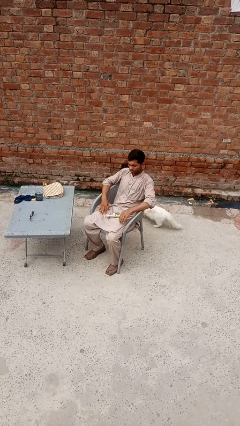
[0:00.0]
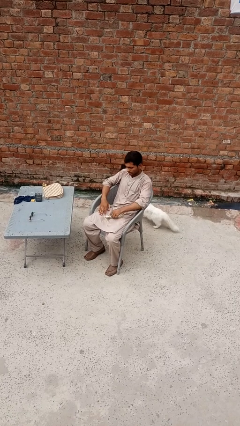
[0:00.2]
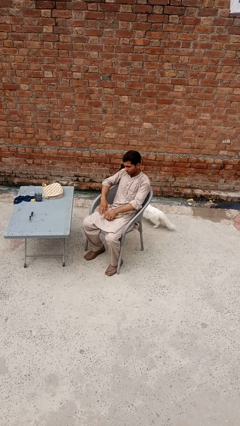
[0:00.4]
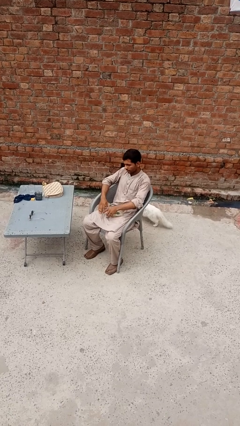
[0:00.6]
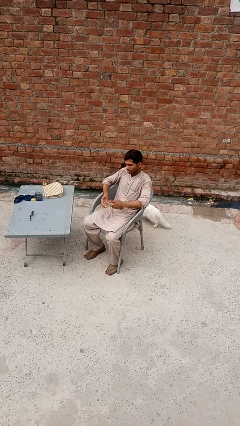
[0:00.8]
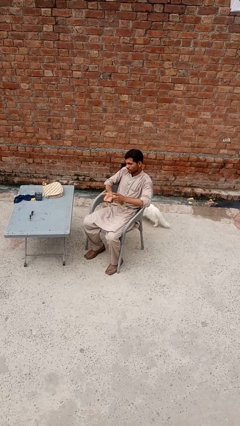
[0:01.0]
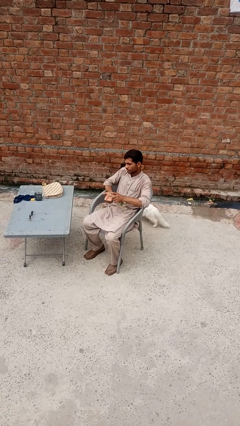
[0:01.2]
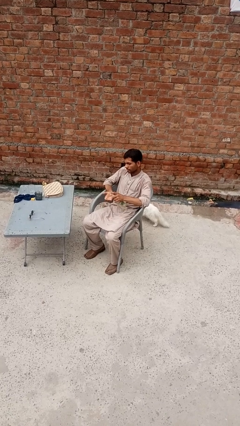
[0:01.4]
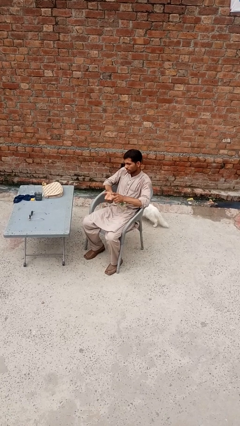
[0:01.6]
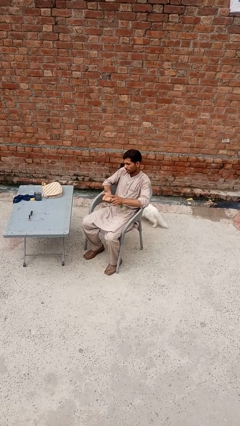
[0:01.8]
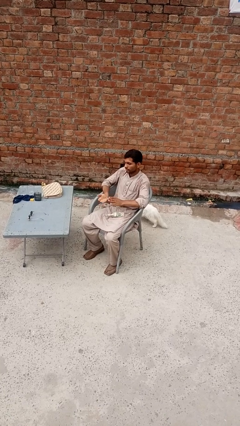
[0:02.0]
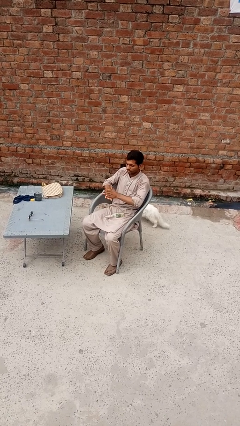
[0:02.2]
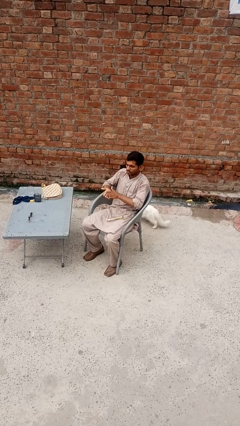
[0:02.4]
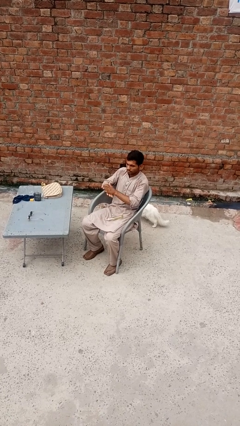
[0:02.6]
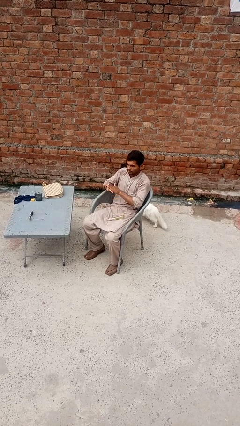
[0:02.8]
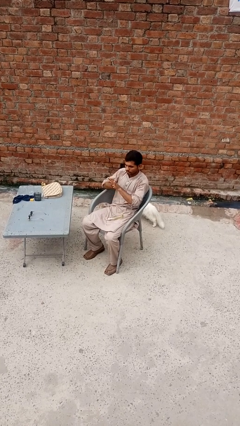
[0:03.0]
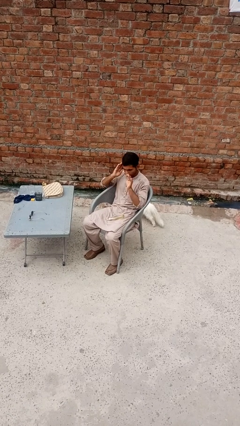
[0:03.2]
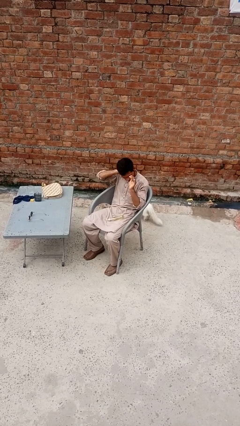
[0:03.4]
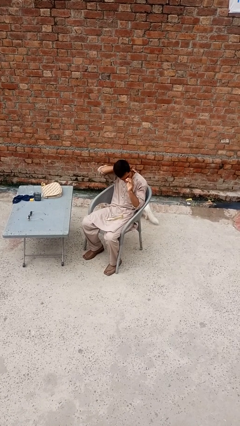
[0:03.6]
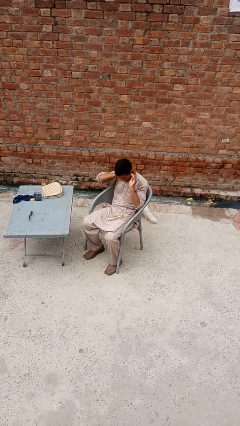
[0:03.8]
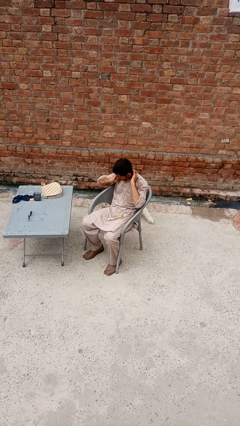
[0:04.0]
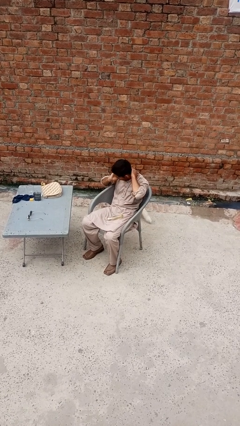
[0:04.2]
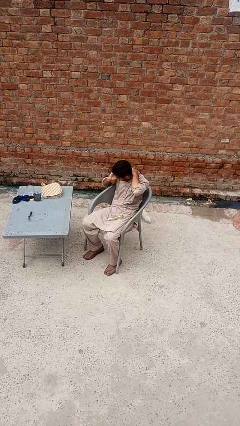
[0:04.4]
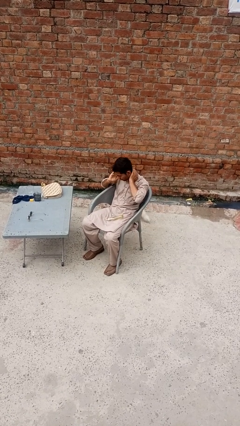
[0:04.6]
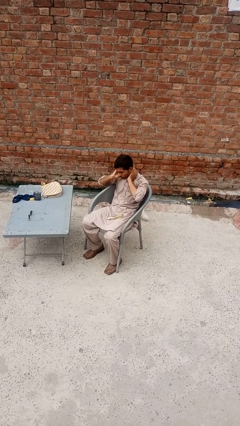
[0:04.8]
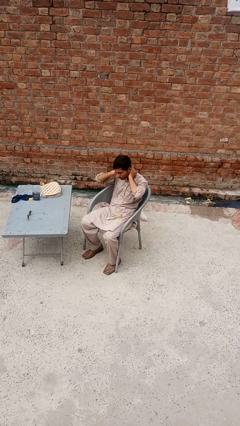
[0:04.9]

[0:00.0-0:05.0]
person applies sunscreen

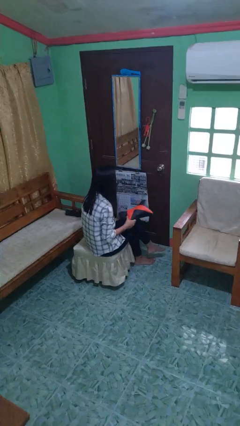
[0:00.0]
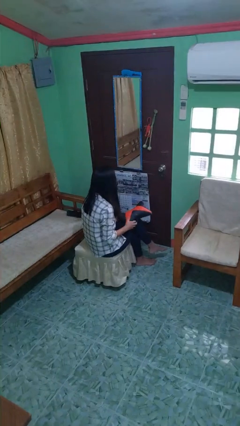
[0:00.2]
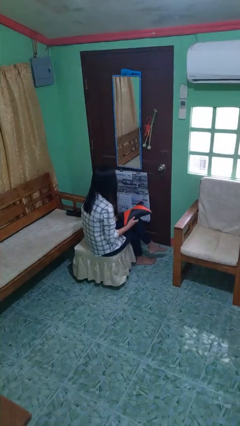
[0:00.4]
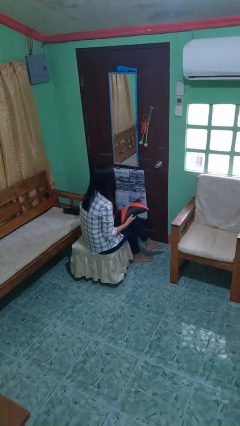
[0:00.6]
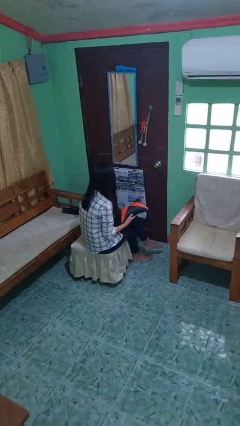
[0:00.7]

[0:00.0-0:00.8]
person drops object

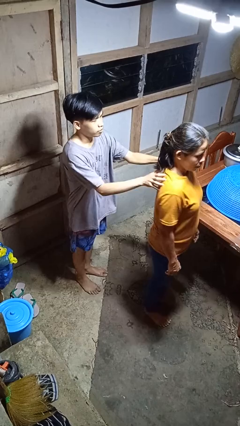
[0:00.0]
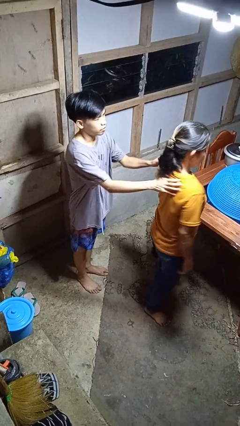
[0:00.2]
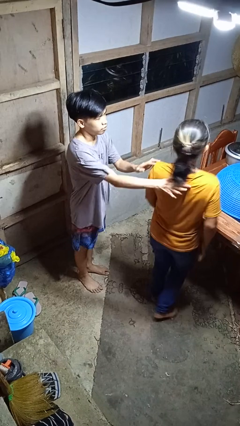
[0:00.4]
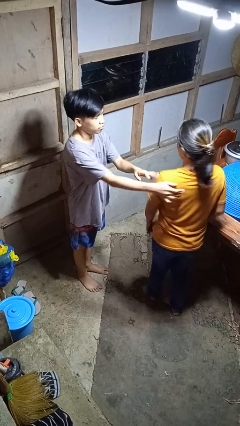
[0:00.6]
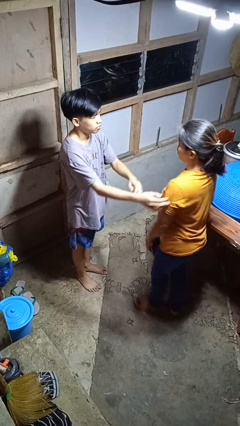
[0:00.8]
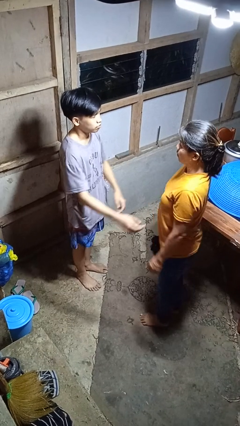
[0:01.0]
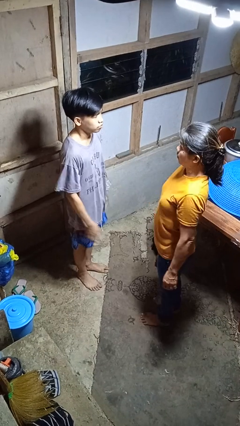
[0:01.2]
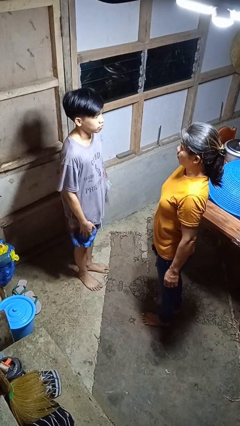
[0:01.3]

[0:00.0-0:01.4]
person spins person around

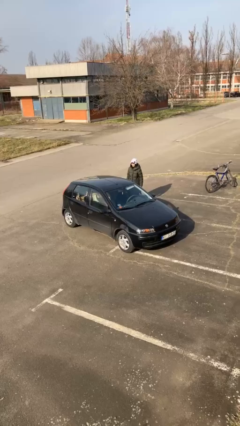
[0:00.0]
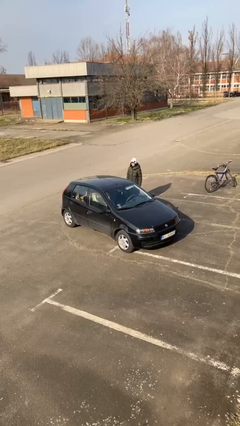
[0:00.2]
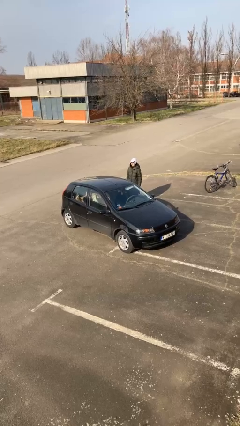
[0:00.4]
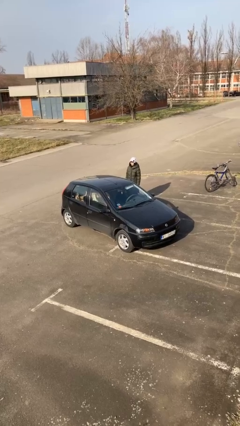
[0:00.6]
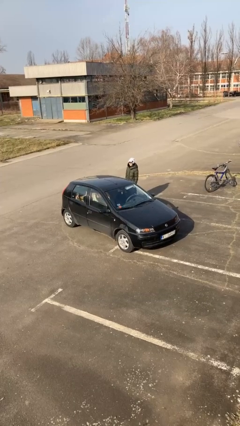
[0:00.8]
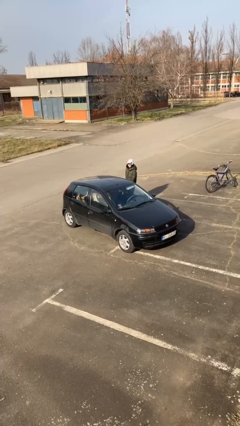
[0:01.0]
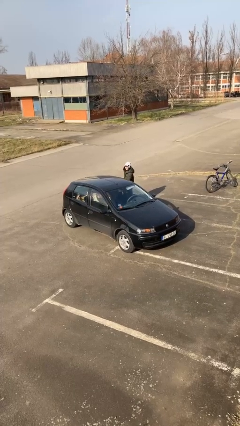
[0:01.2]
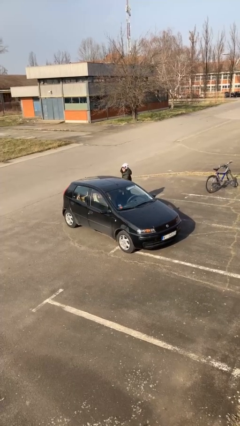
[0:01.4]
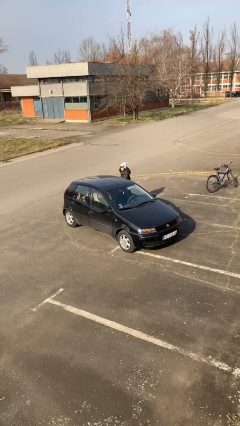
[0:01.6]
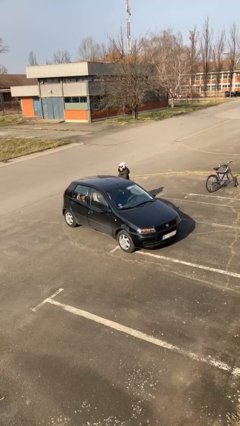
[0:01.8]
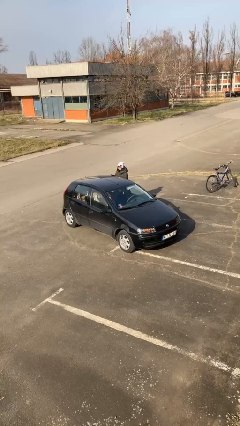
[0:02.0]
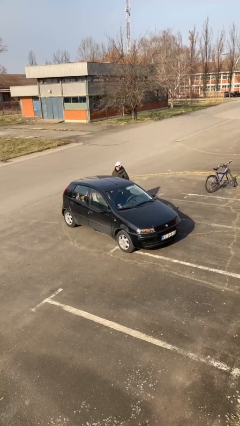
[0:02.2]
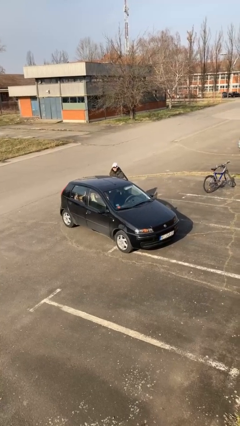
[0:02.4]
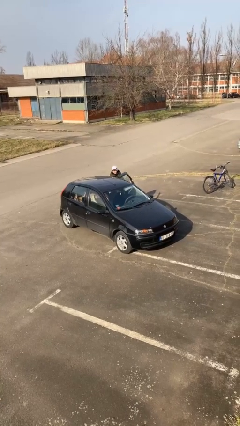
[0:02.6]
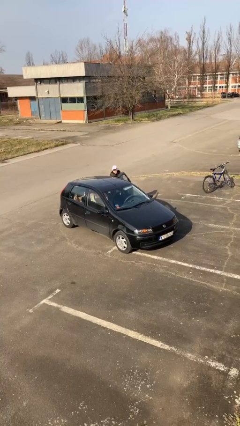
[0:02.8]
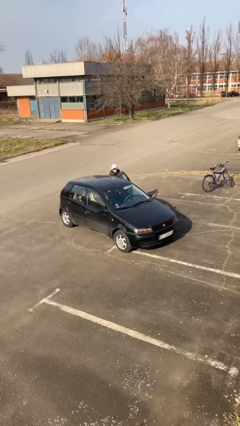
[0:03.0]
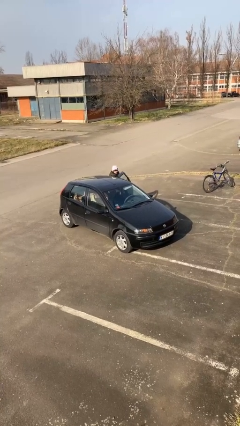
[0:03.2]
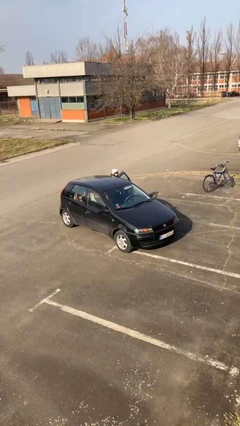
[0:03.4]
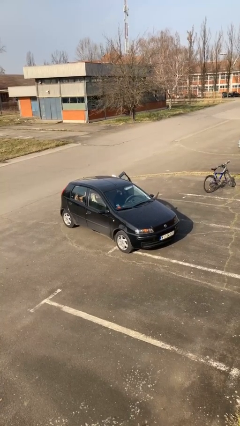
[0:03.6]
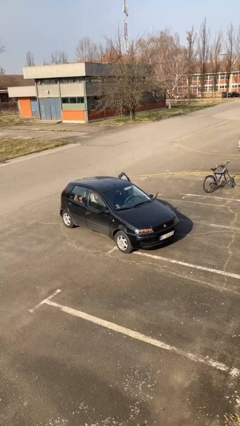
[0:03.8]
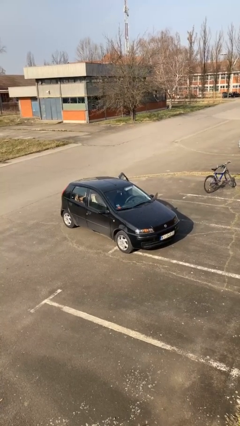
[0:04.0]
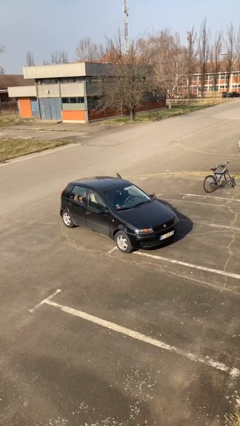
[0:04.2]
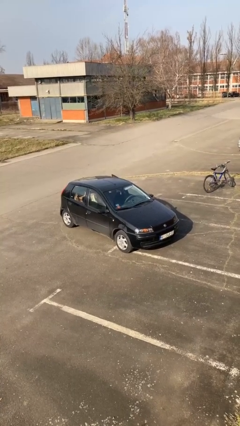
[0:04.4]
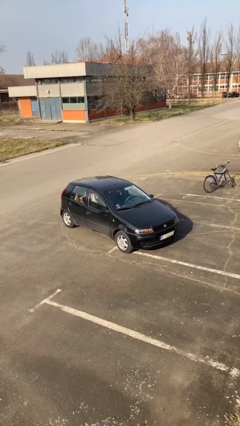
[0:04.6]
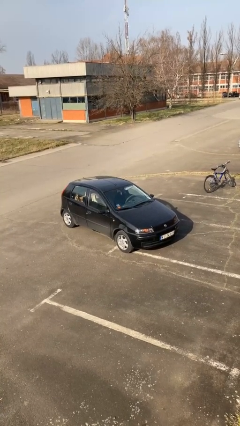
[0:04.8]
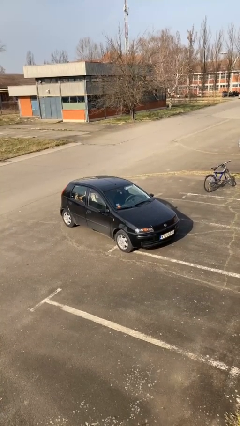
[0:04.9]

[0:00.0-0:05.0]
car picks up person

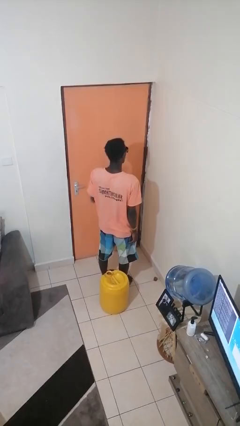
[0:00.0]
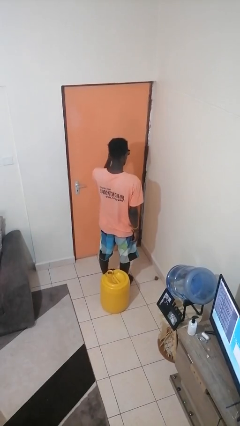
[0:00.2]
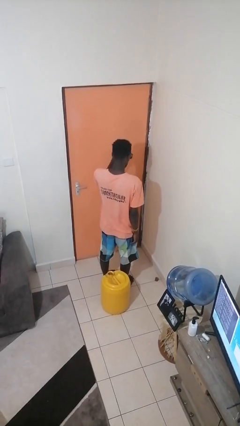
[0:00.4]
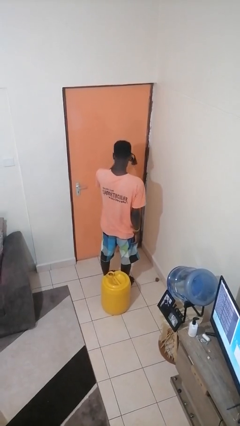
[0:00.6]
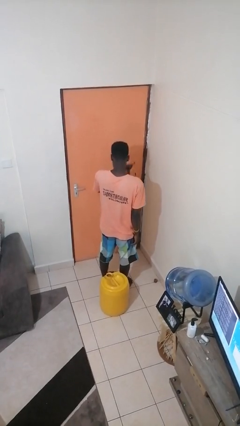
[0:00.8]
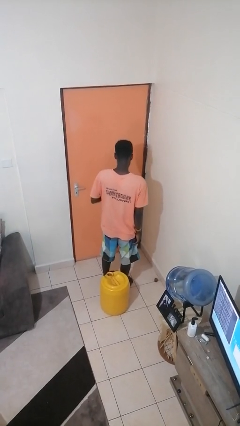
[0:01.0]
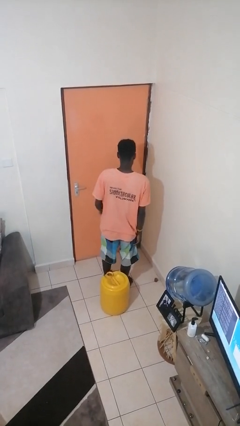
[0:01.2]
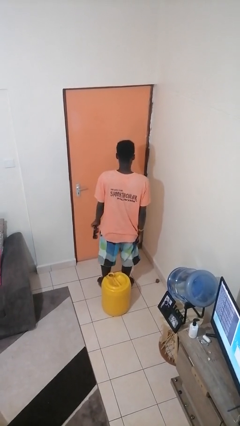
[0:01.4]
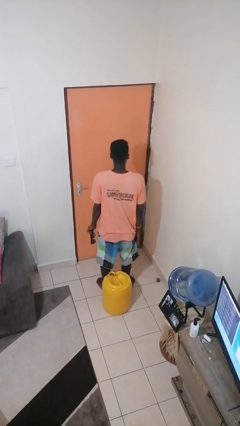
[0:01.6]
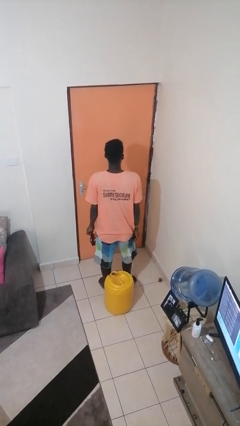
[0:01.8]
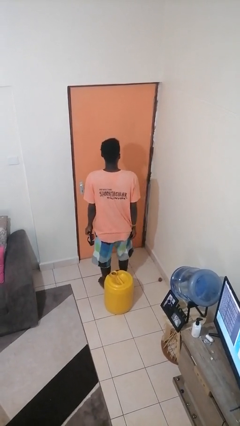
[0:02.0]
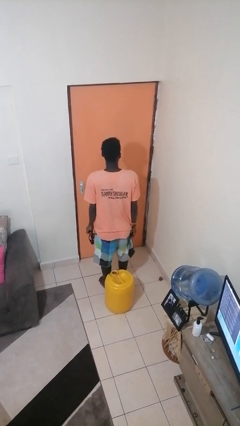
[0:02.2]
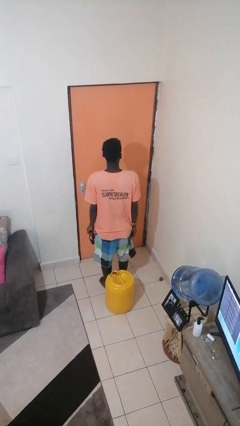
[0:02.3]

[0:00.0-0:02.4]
person takes off sunglasses

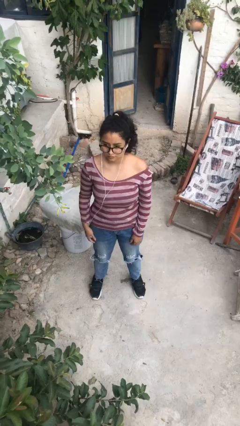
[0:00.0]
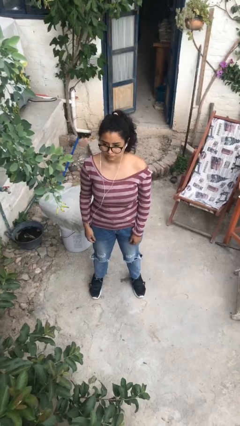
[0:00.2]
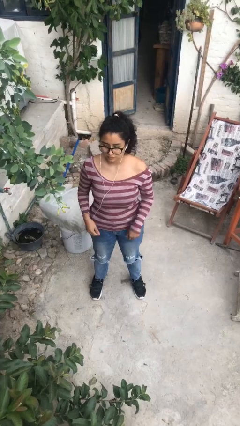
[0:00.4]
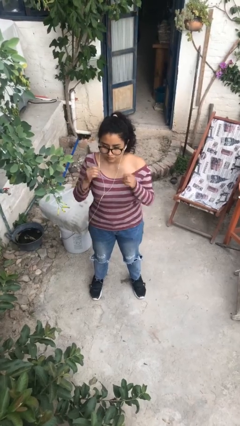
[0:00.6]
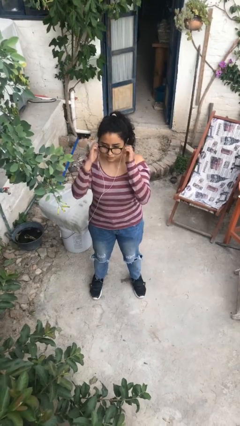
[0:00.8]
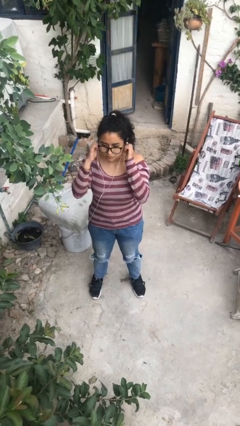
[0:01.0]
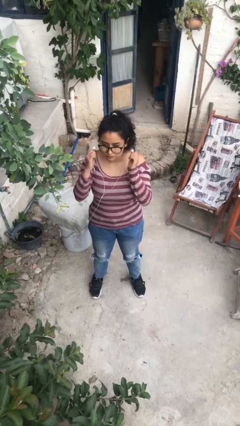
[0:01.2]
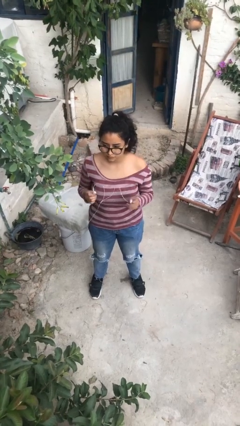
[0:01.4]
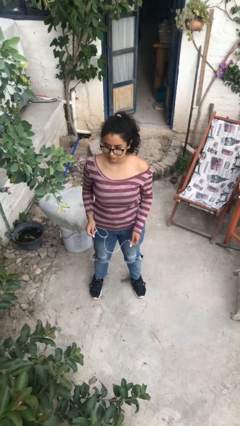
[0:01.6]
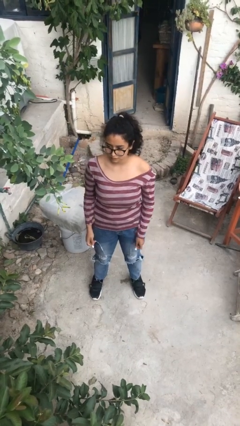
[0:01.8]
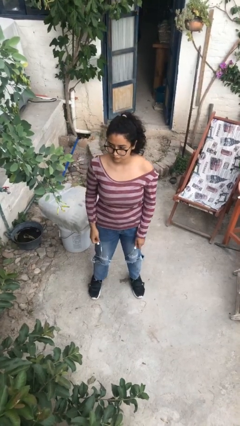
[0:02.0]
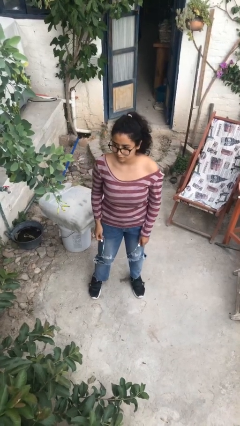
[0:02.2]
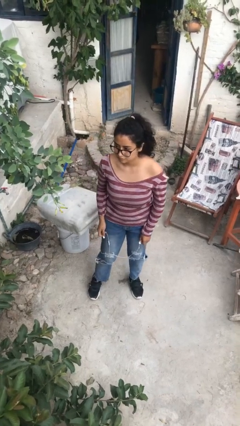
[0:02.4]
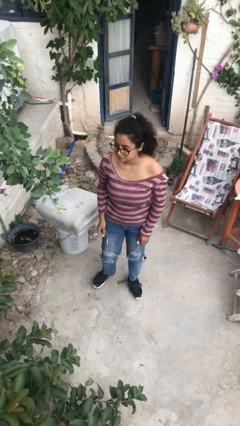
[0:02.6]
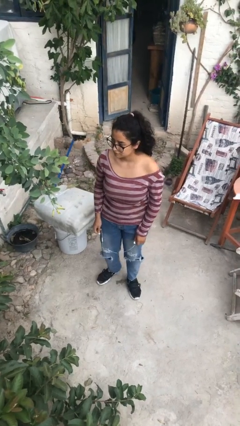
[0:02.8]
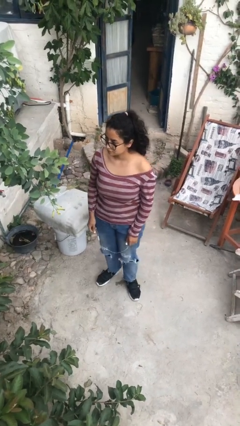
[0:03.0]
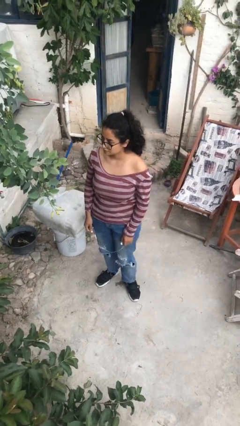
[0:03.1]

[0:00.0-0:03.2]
person takes off headphones
